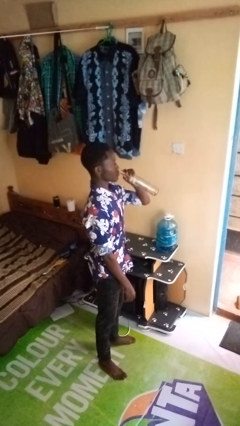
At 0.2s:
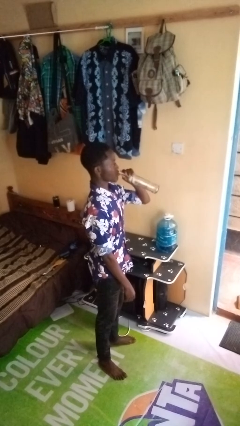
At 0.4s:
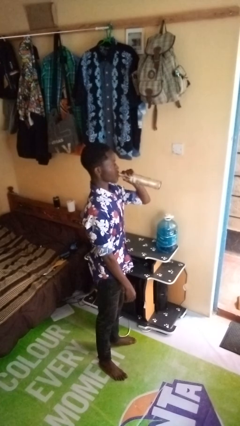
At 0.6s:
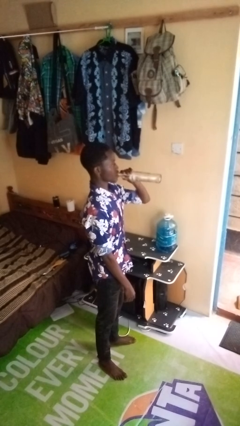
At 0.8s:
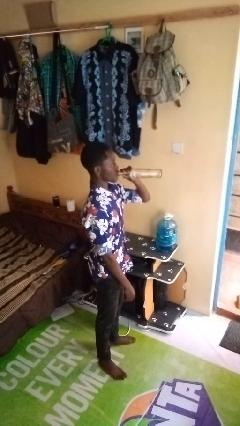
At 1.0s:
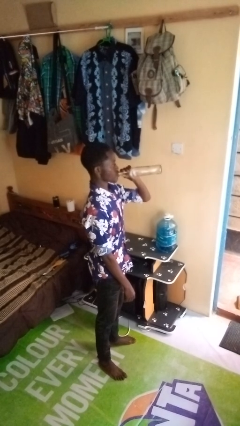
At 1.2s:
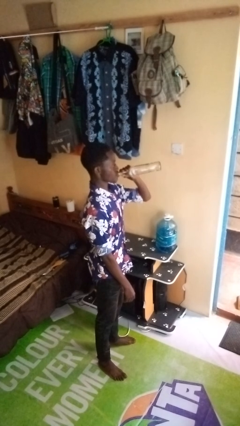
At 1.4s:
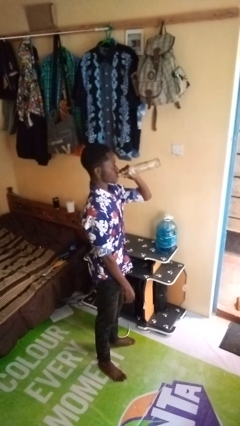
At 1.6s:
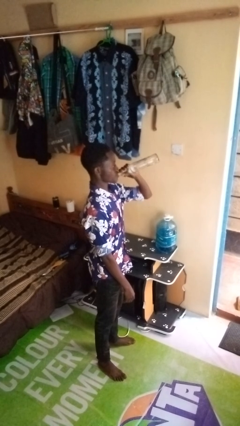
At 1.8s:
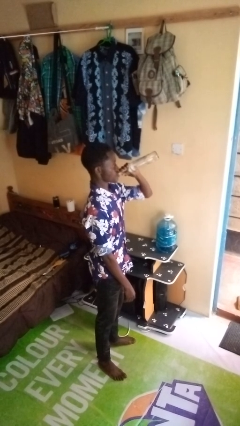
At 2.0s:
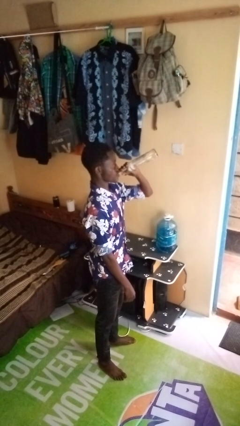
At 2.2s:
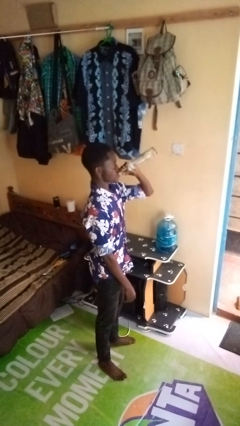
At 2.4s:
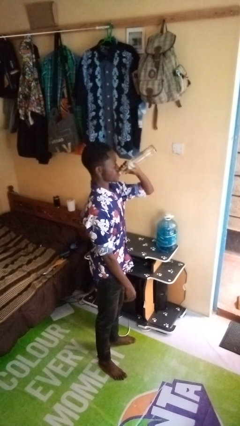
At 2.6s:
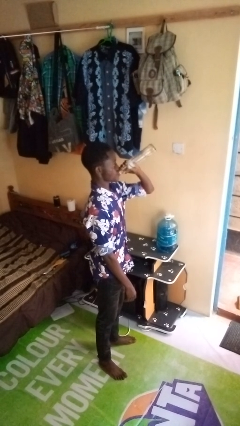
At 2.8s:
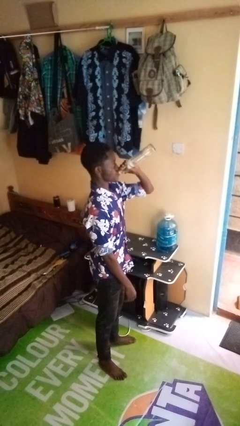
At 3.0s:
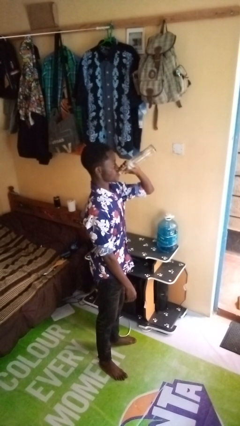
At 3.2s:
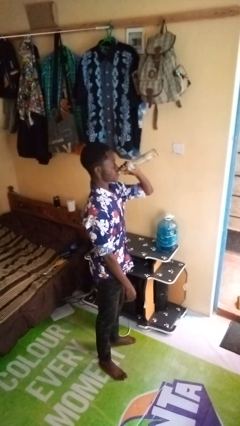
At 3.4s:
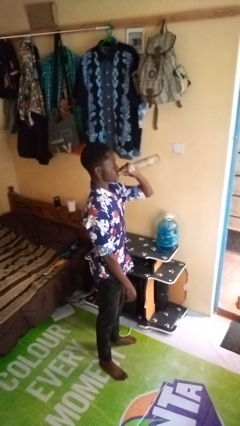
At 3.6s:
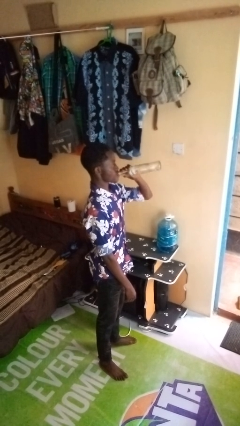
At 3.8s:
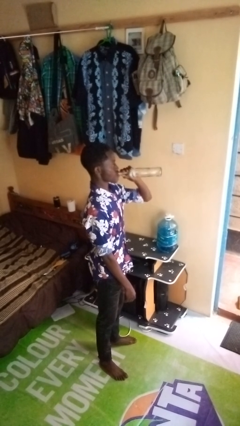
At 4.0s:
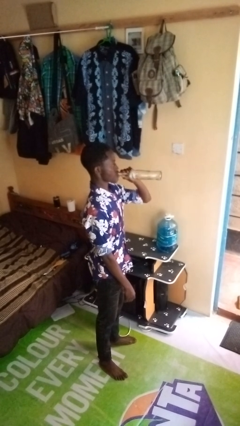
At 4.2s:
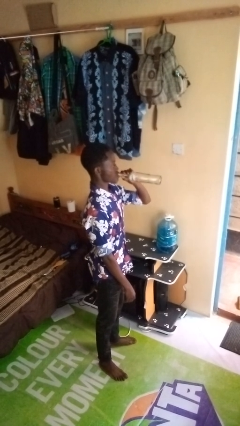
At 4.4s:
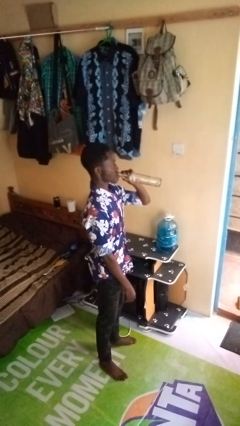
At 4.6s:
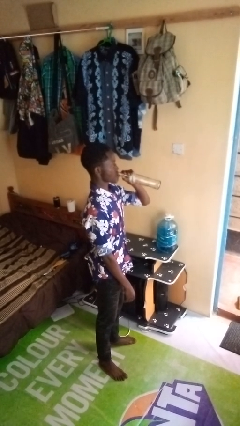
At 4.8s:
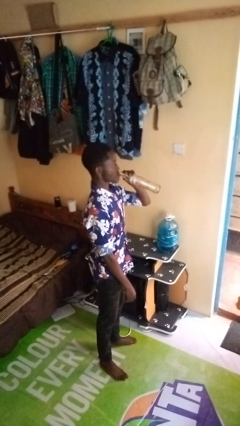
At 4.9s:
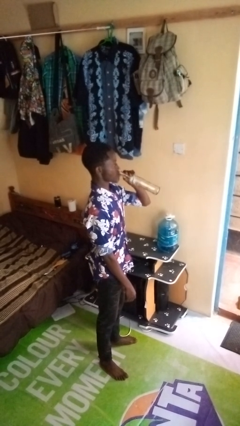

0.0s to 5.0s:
person drinks from bottle

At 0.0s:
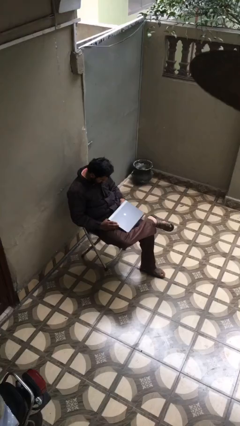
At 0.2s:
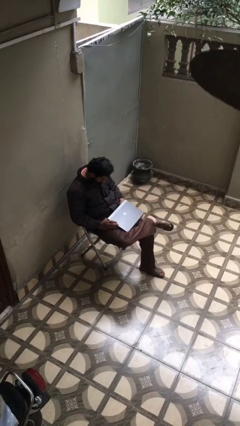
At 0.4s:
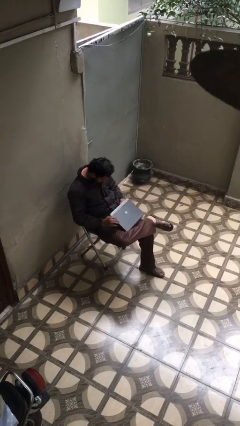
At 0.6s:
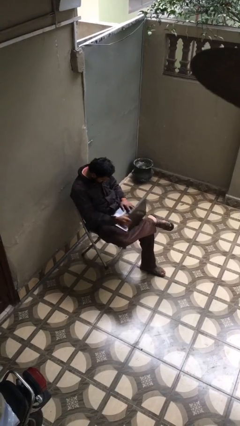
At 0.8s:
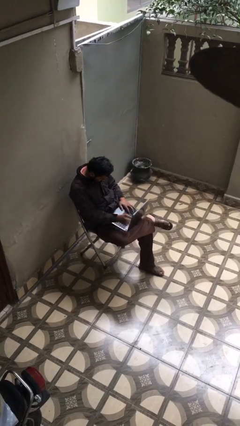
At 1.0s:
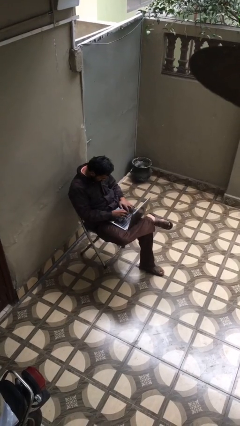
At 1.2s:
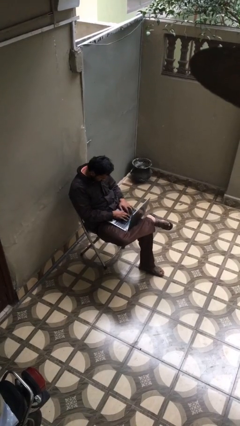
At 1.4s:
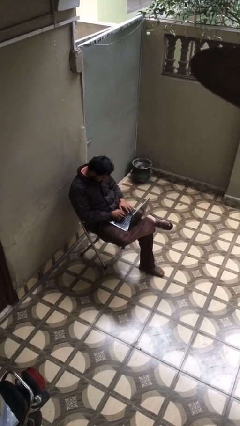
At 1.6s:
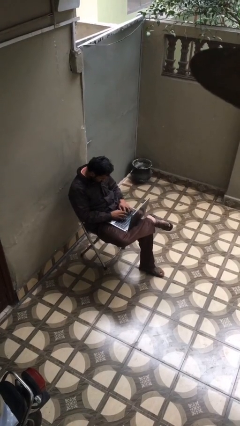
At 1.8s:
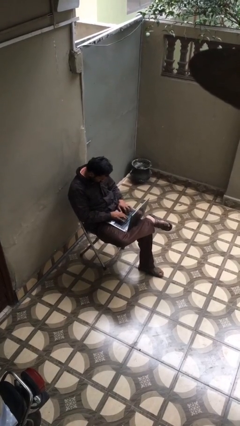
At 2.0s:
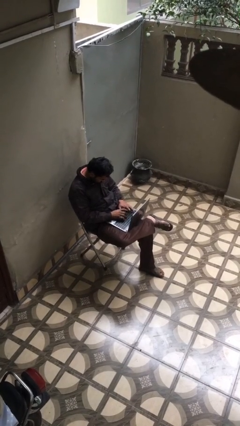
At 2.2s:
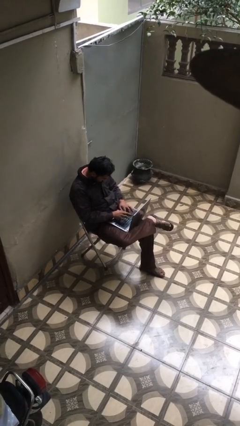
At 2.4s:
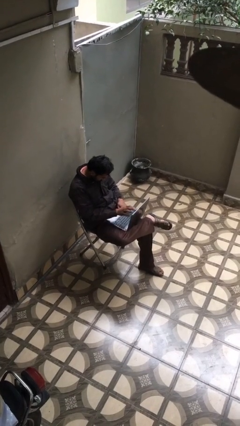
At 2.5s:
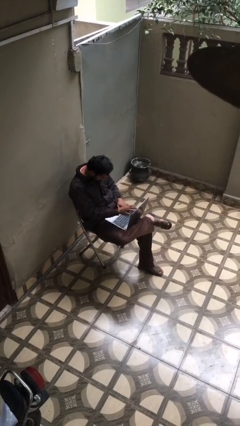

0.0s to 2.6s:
person interacts with laptop

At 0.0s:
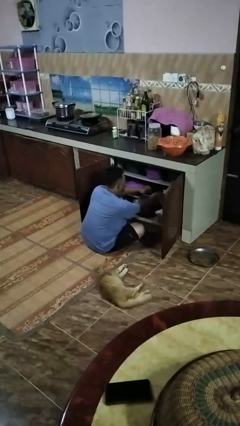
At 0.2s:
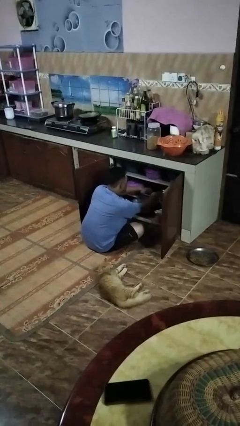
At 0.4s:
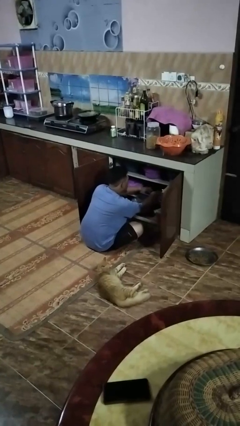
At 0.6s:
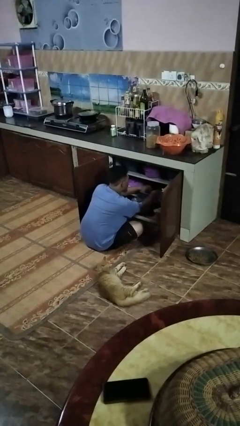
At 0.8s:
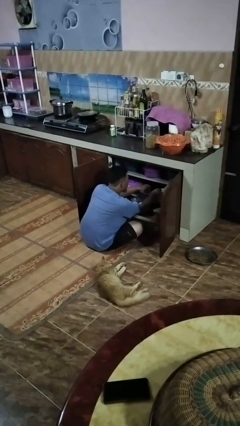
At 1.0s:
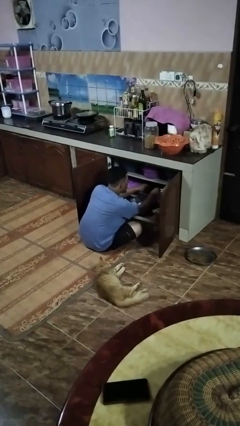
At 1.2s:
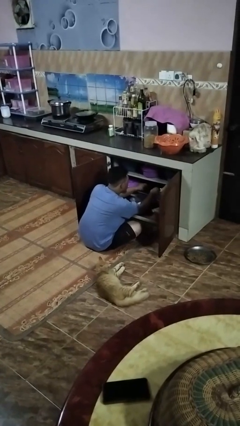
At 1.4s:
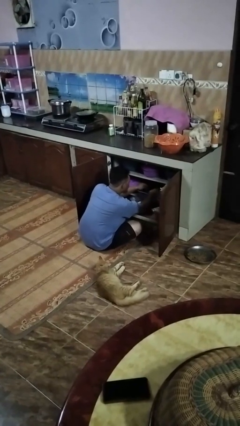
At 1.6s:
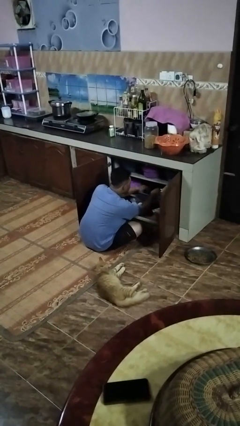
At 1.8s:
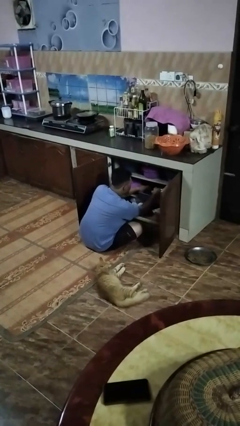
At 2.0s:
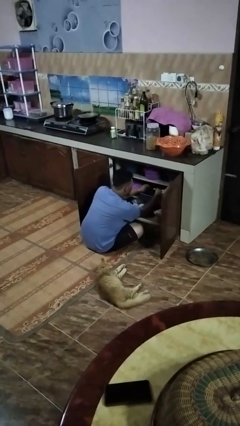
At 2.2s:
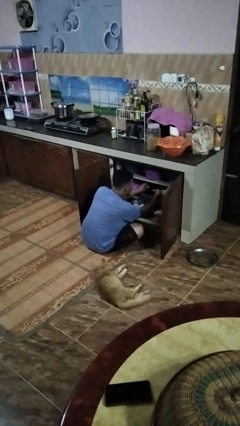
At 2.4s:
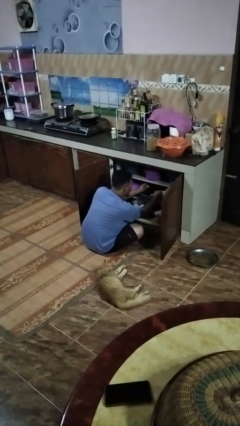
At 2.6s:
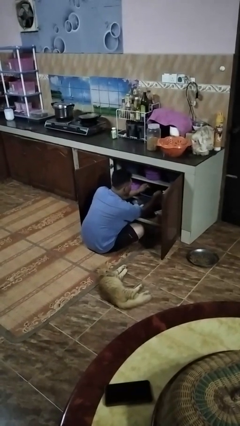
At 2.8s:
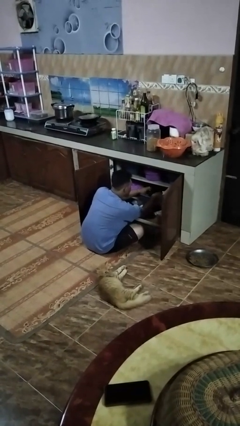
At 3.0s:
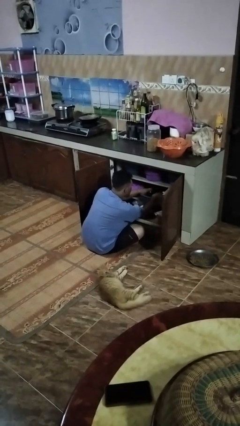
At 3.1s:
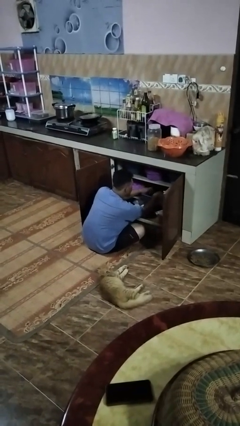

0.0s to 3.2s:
person searches in kitchen drawer

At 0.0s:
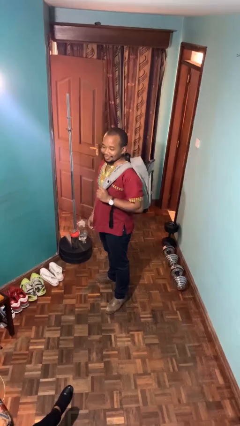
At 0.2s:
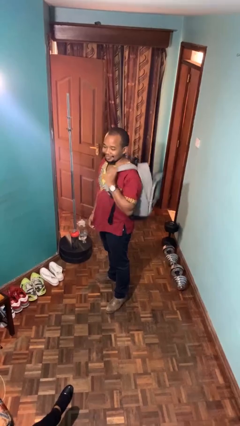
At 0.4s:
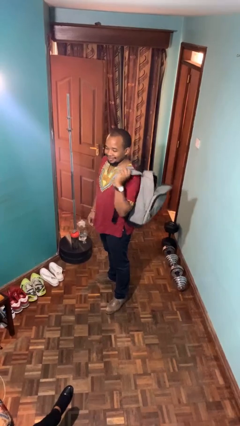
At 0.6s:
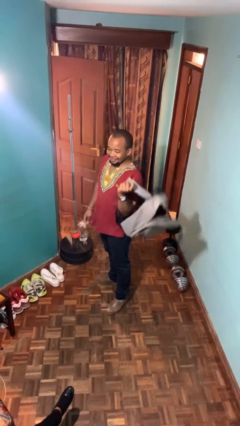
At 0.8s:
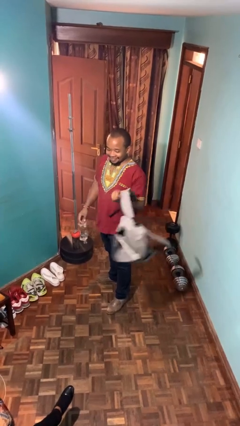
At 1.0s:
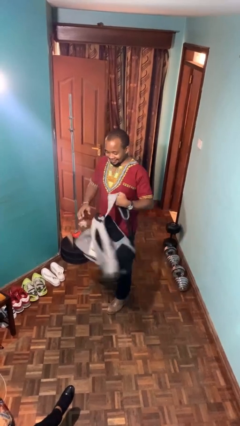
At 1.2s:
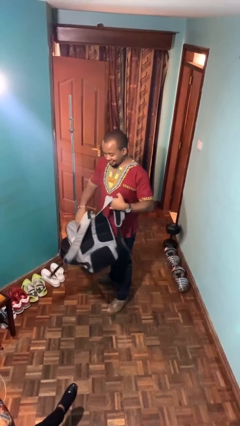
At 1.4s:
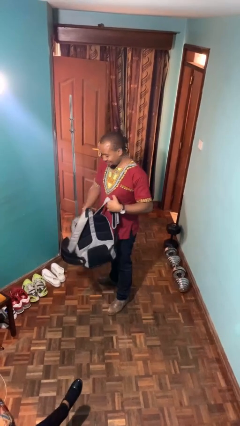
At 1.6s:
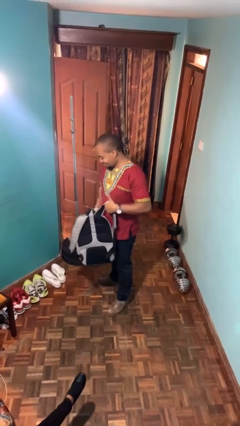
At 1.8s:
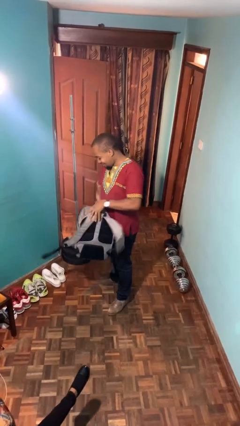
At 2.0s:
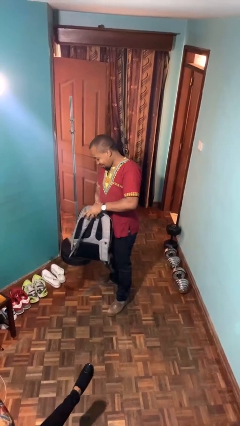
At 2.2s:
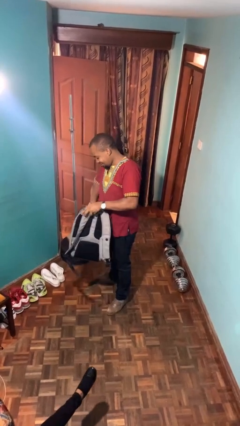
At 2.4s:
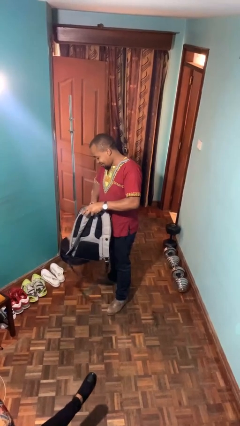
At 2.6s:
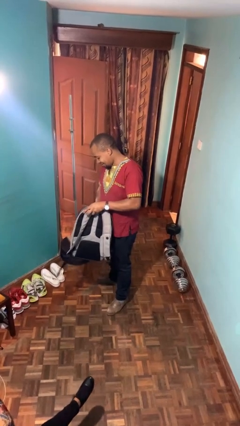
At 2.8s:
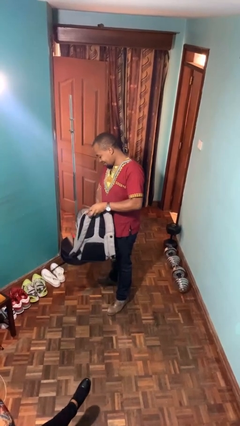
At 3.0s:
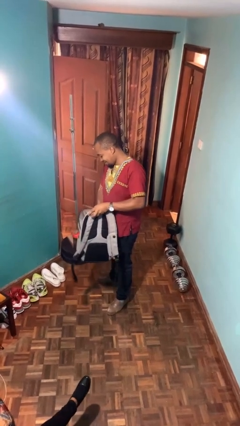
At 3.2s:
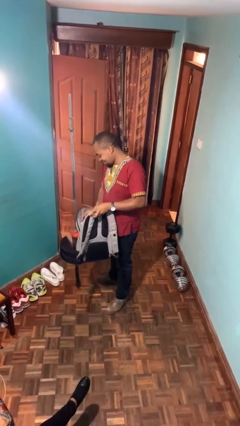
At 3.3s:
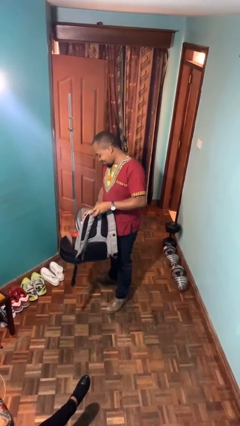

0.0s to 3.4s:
person searches in backpack

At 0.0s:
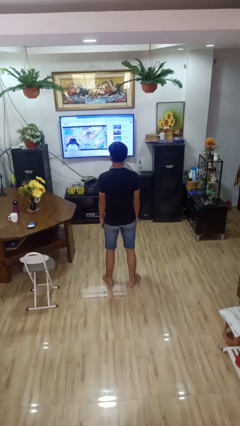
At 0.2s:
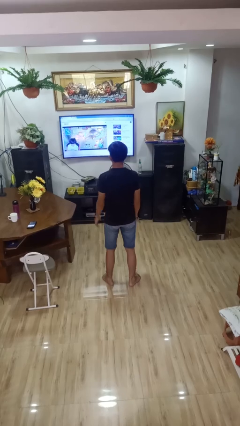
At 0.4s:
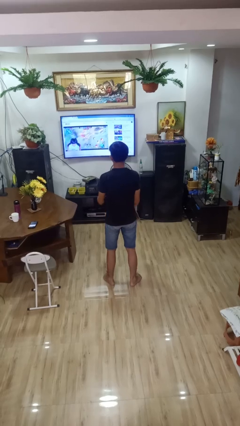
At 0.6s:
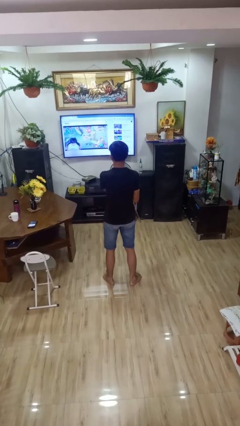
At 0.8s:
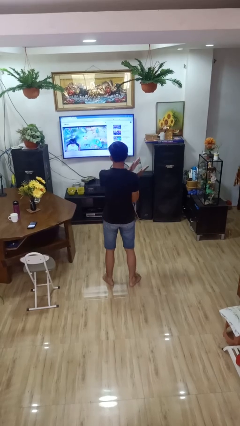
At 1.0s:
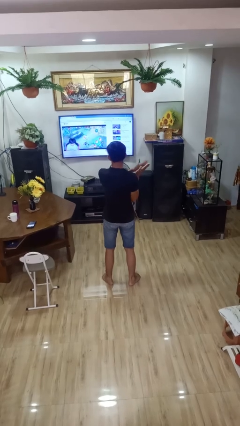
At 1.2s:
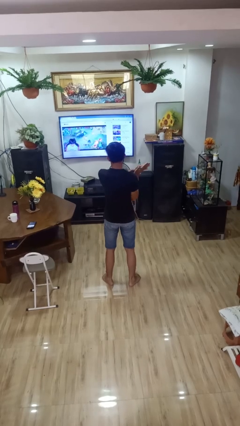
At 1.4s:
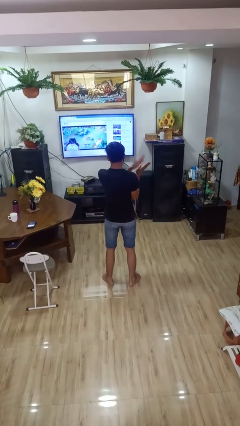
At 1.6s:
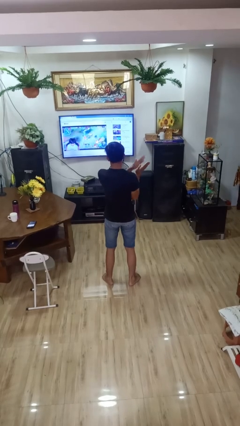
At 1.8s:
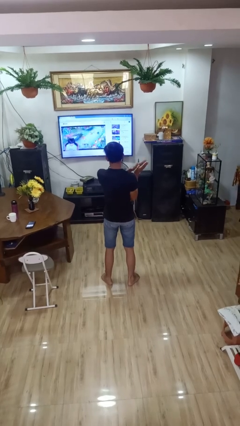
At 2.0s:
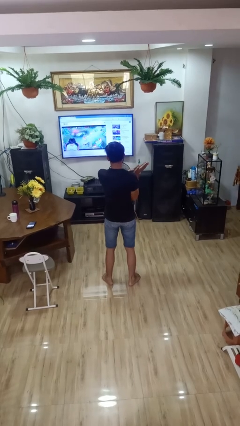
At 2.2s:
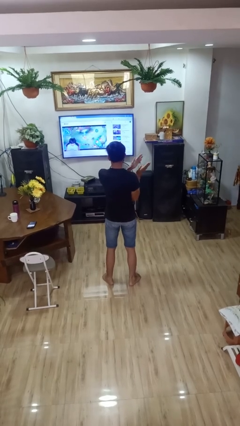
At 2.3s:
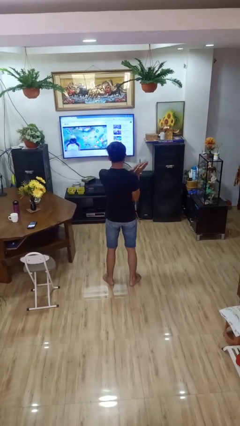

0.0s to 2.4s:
person claps hands

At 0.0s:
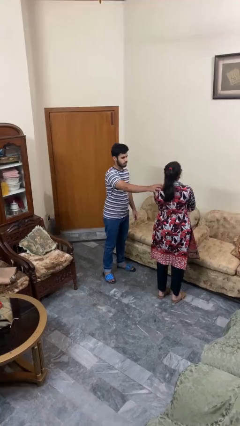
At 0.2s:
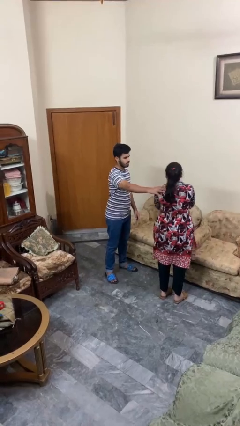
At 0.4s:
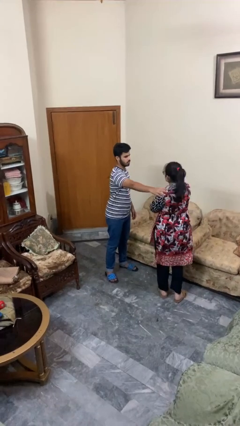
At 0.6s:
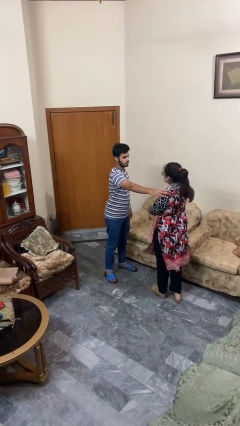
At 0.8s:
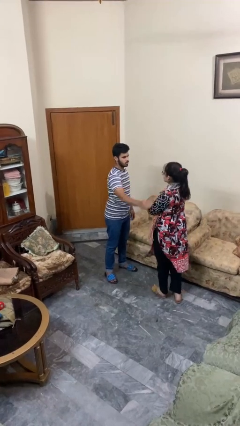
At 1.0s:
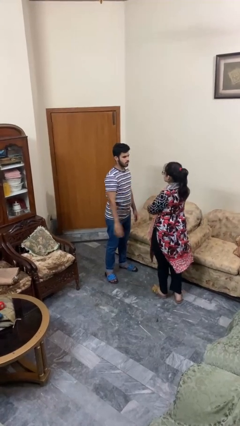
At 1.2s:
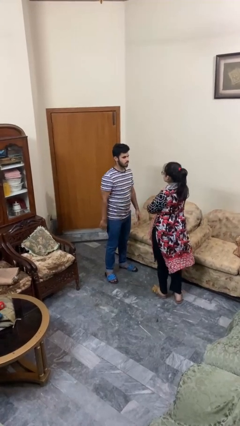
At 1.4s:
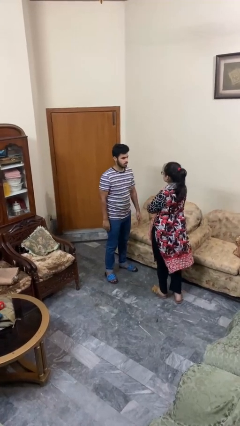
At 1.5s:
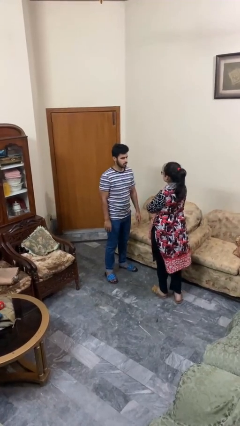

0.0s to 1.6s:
person spins person around
